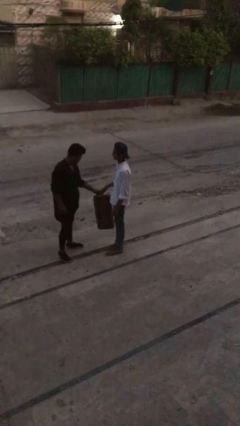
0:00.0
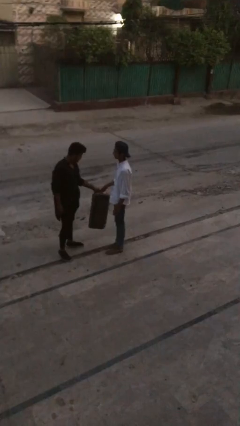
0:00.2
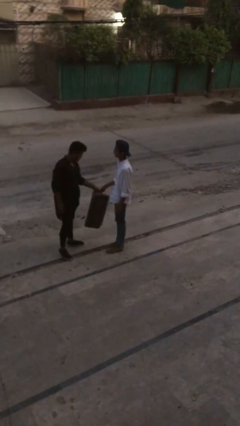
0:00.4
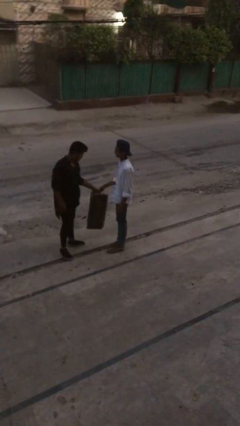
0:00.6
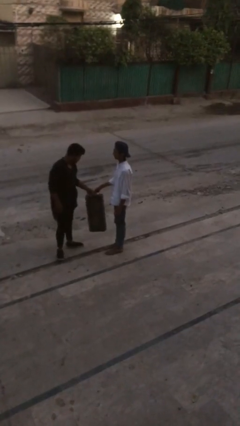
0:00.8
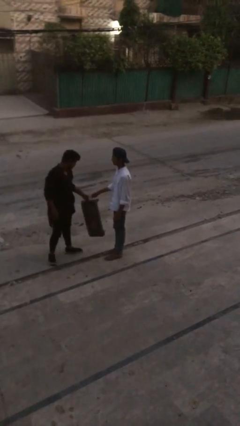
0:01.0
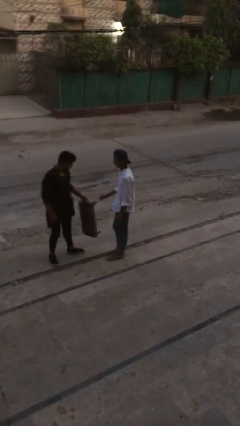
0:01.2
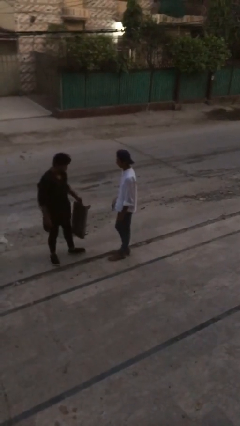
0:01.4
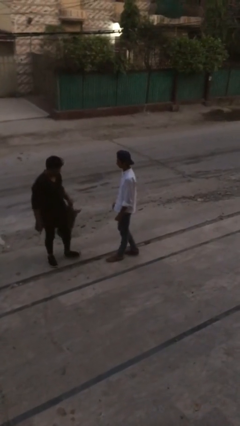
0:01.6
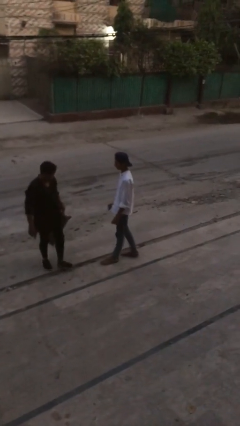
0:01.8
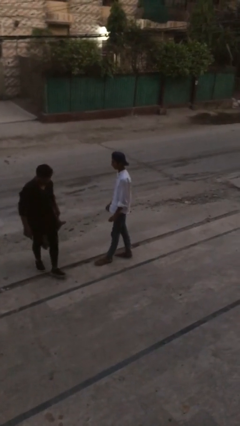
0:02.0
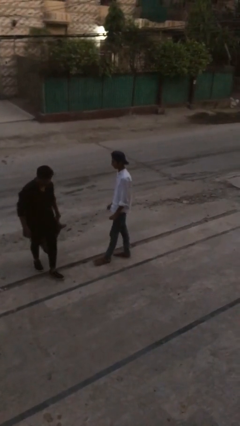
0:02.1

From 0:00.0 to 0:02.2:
person transfers object to person

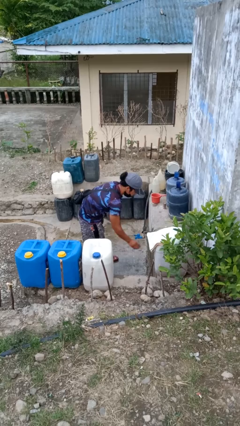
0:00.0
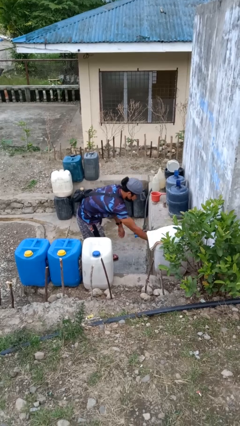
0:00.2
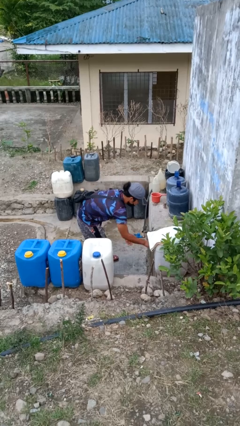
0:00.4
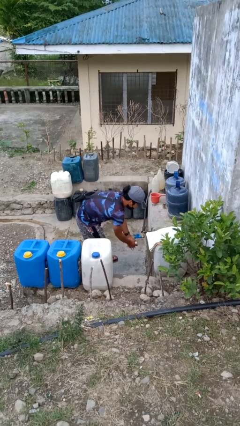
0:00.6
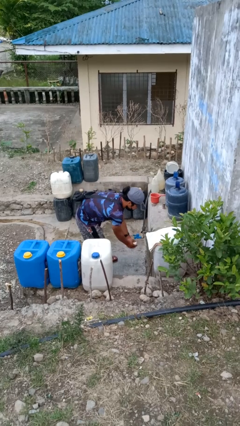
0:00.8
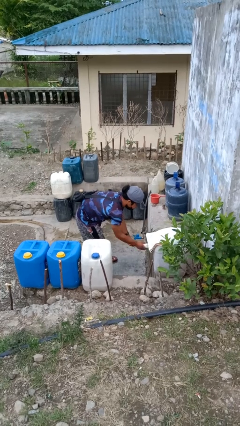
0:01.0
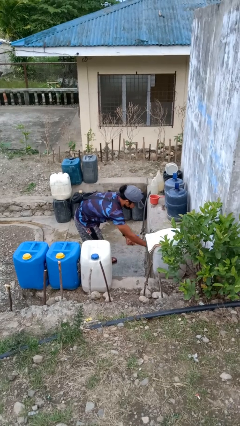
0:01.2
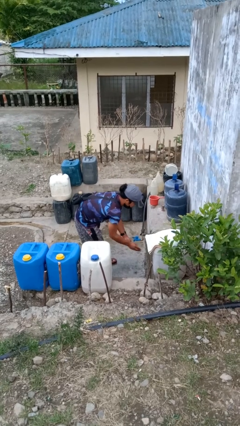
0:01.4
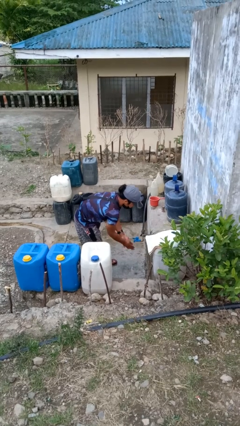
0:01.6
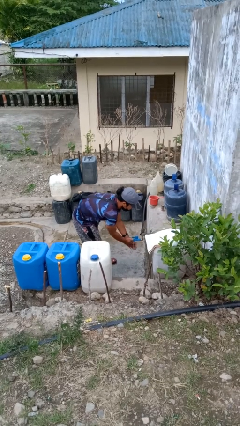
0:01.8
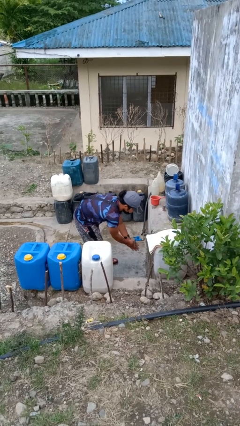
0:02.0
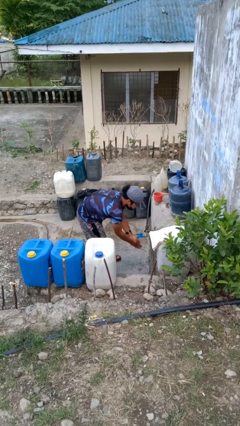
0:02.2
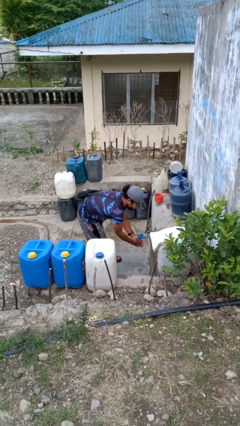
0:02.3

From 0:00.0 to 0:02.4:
person washes hands

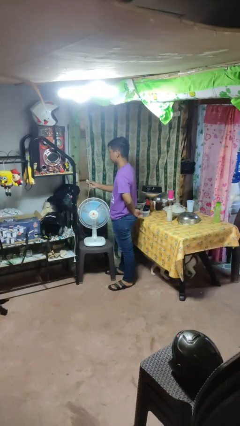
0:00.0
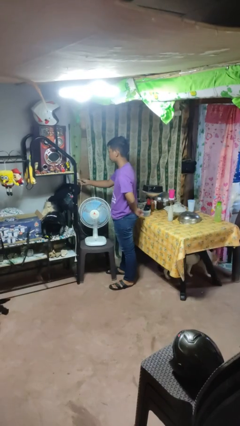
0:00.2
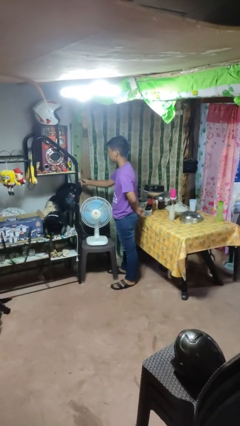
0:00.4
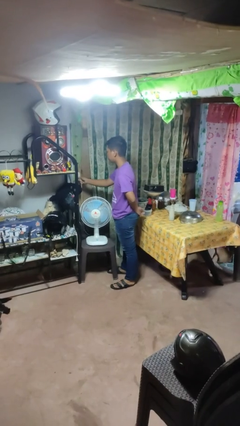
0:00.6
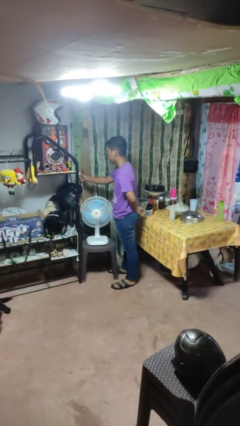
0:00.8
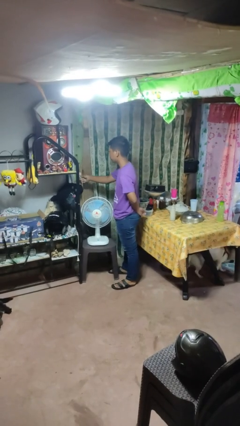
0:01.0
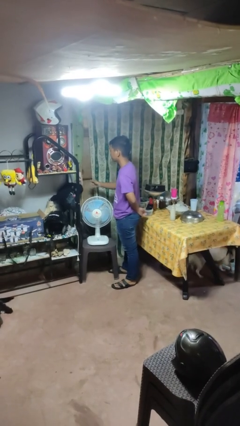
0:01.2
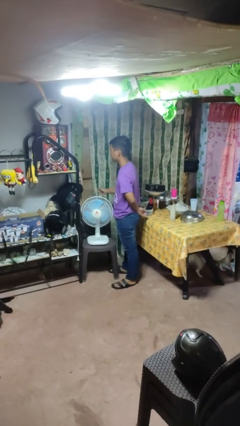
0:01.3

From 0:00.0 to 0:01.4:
person plugs into electrical socket

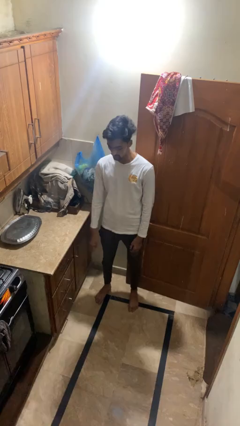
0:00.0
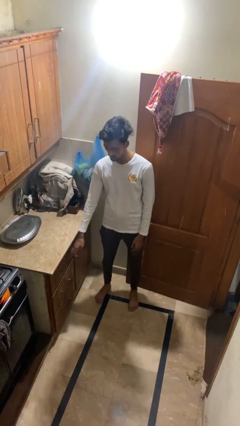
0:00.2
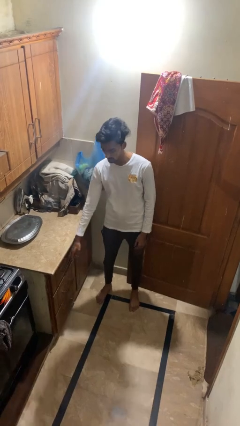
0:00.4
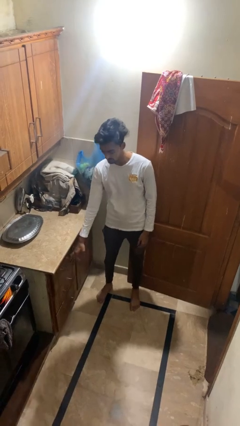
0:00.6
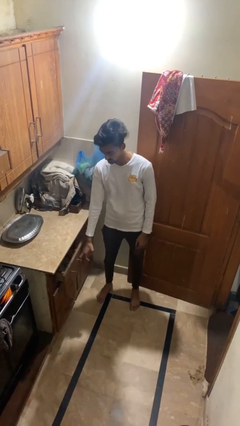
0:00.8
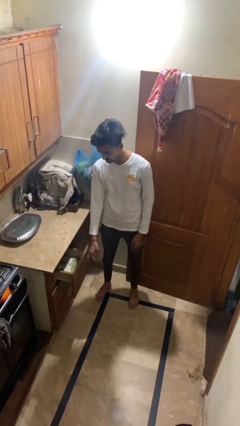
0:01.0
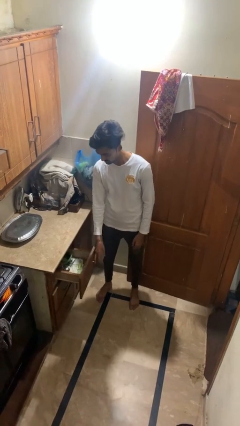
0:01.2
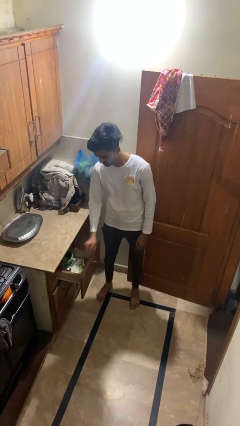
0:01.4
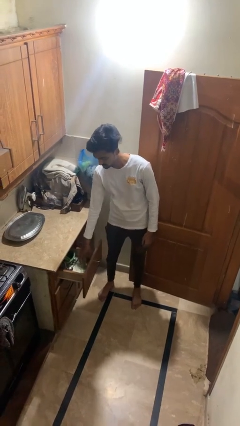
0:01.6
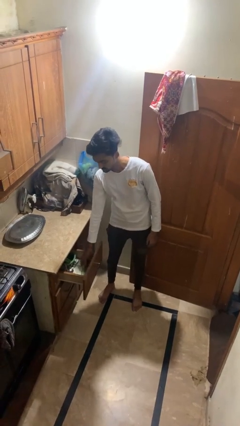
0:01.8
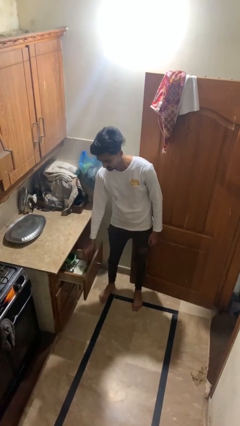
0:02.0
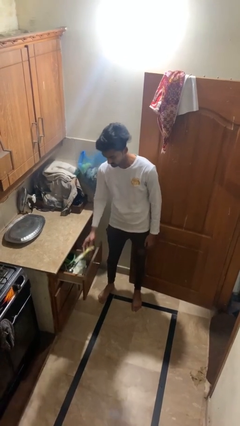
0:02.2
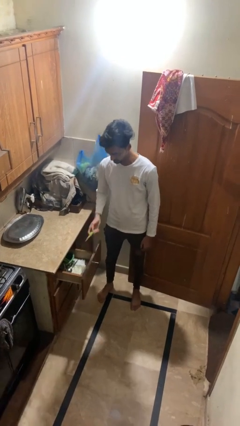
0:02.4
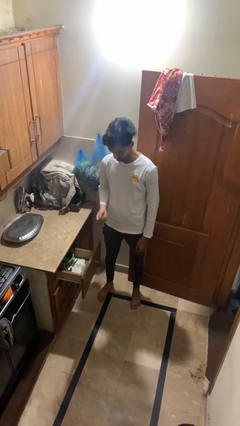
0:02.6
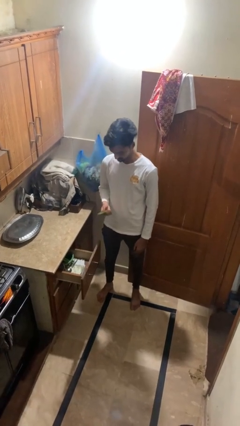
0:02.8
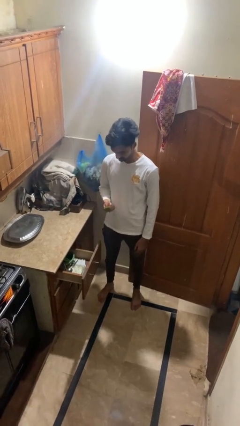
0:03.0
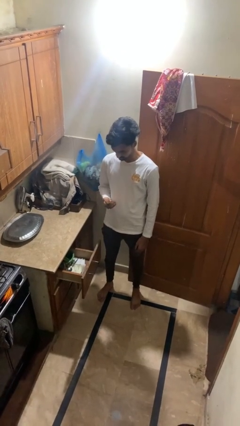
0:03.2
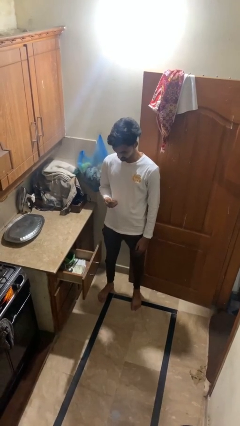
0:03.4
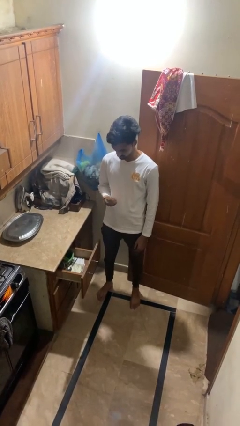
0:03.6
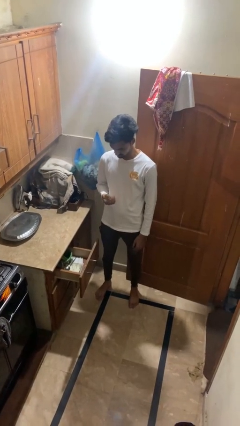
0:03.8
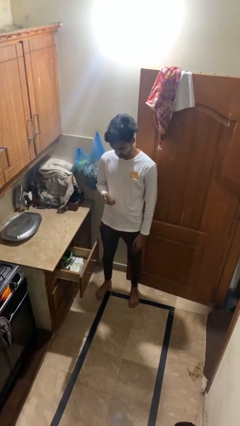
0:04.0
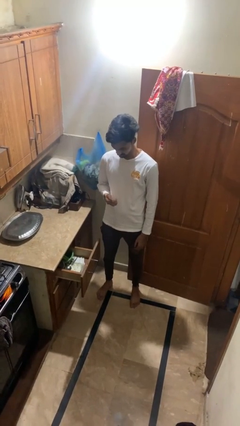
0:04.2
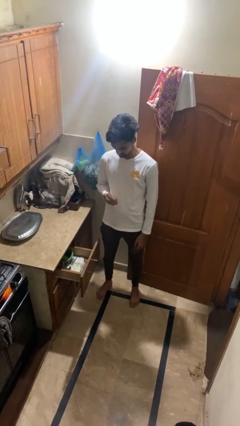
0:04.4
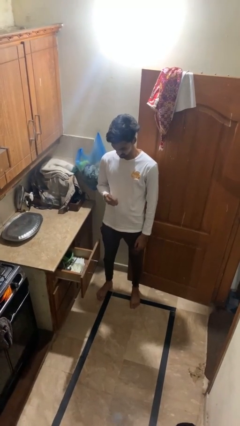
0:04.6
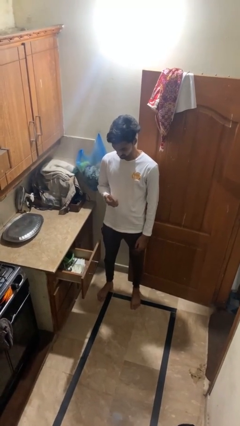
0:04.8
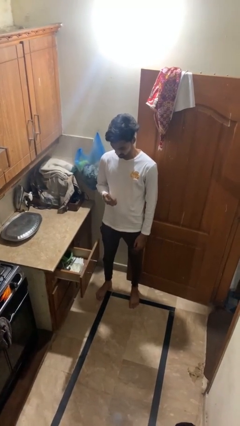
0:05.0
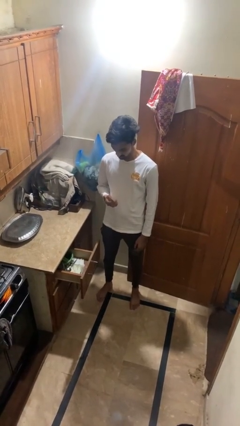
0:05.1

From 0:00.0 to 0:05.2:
person takes object from kitchen drawer

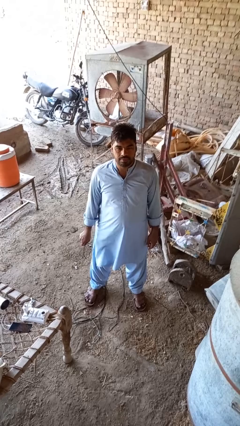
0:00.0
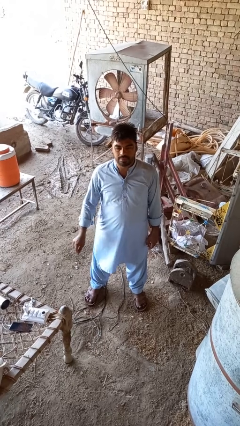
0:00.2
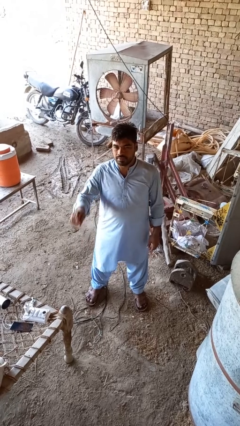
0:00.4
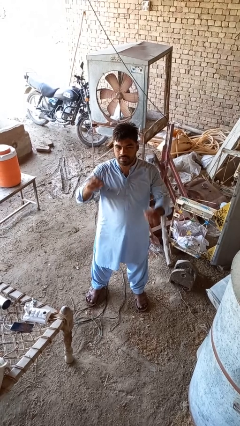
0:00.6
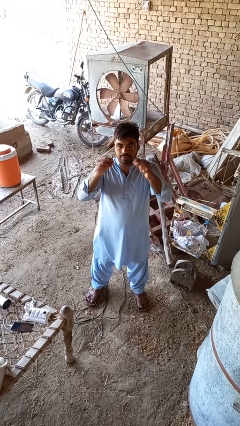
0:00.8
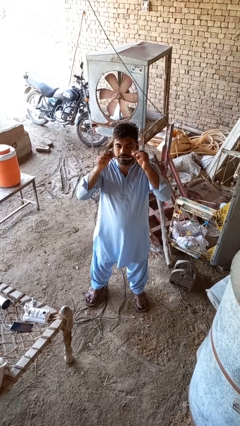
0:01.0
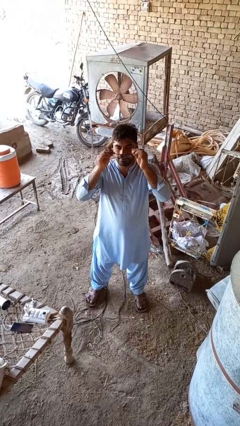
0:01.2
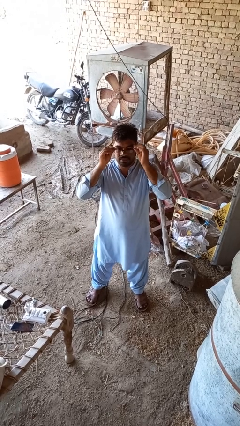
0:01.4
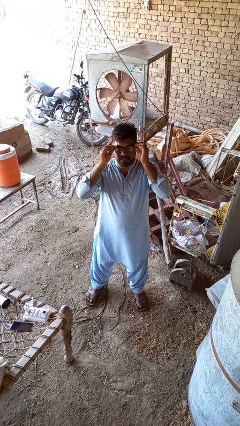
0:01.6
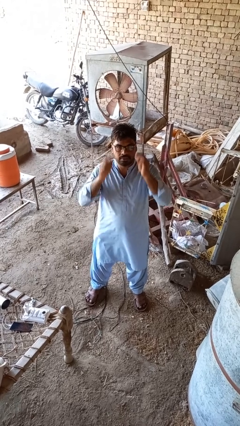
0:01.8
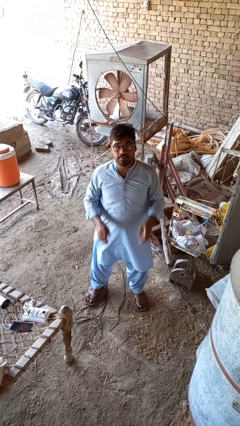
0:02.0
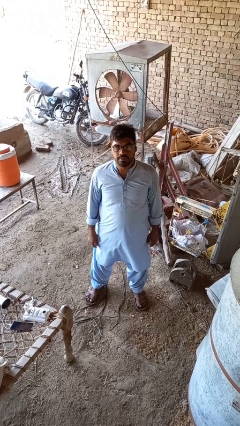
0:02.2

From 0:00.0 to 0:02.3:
person puts on glasses

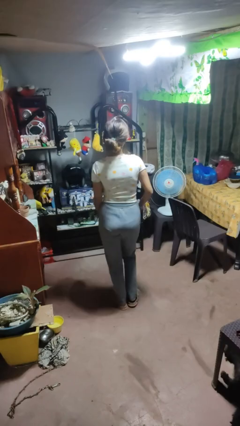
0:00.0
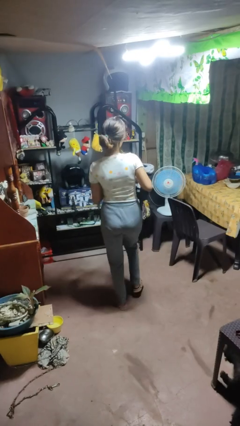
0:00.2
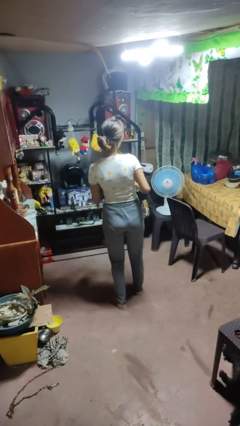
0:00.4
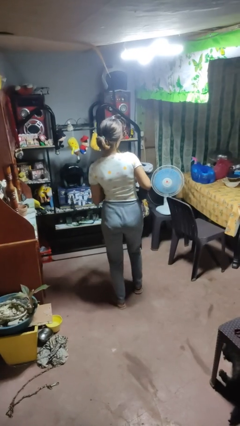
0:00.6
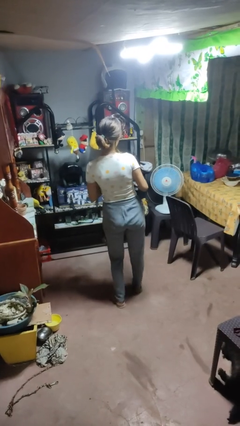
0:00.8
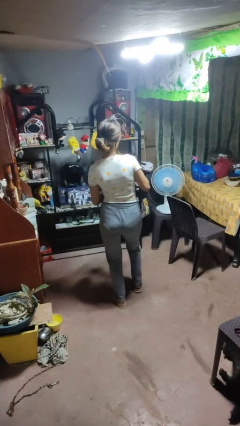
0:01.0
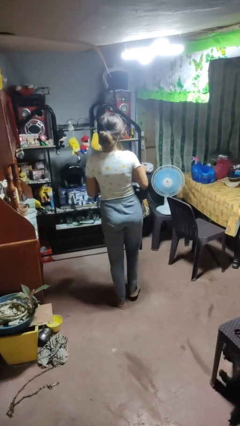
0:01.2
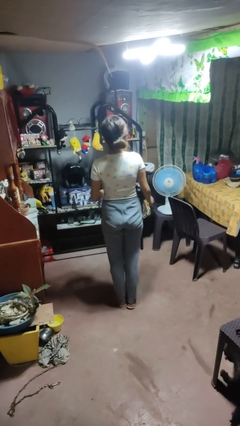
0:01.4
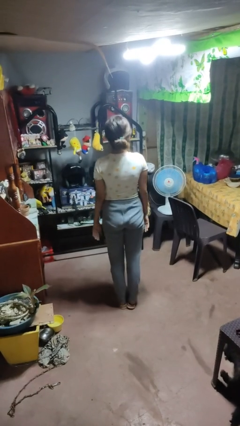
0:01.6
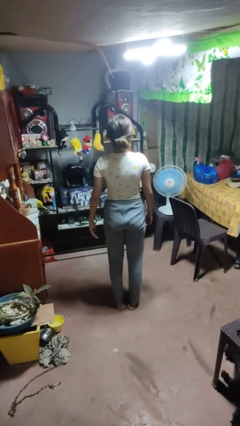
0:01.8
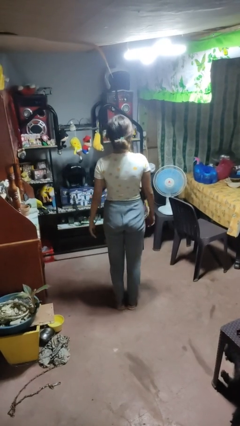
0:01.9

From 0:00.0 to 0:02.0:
person dances in place

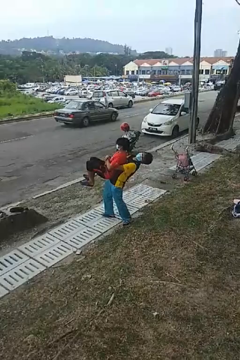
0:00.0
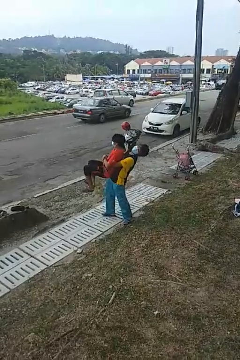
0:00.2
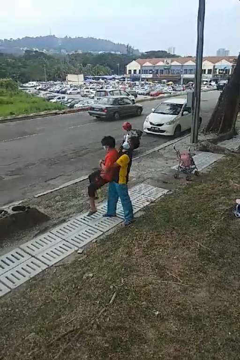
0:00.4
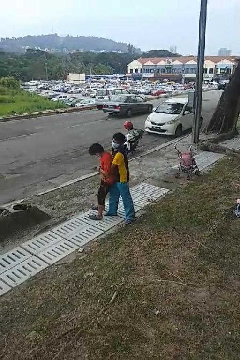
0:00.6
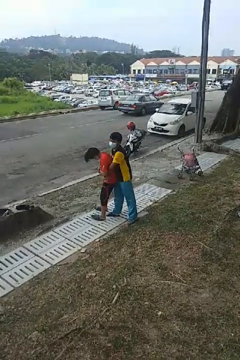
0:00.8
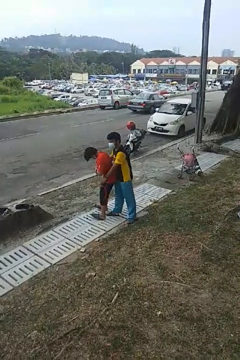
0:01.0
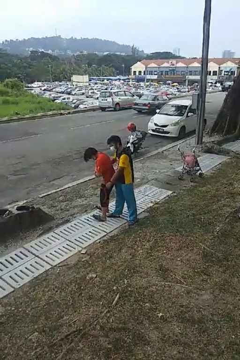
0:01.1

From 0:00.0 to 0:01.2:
person puts down person

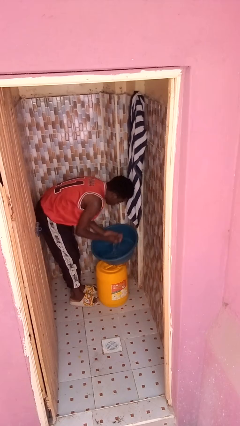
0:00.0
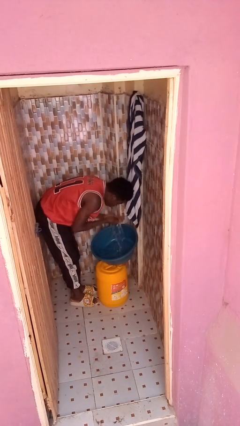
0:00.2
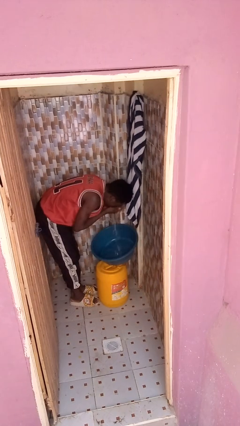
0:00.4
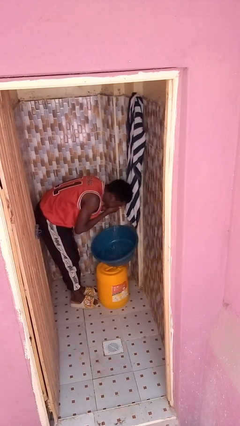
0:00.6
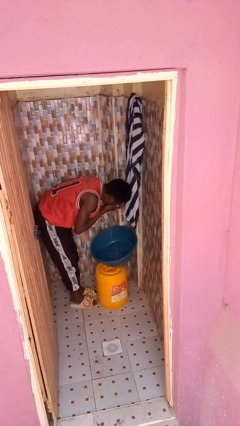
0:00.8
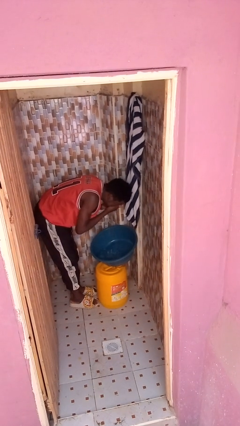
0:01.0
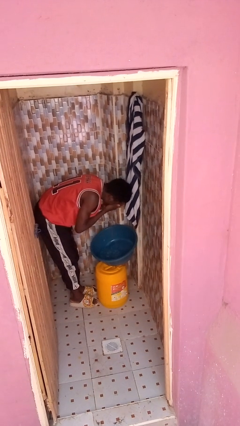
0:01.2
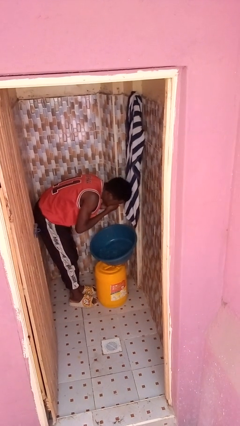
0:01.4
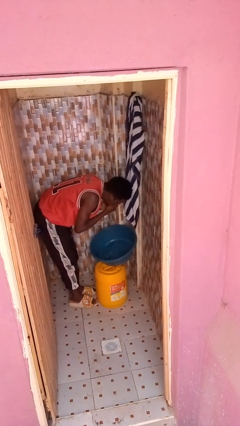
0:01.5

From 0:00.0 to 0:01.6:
person washes face
